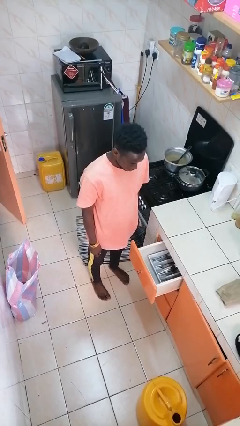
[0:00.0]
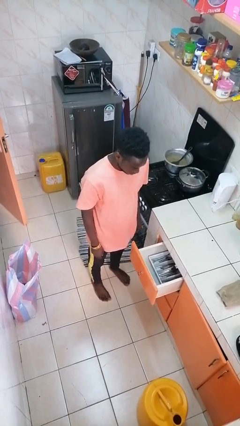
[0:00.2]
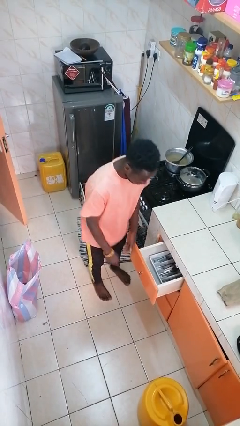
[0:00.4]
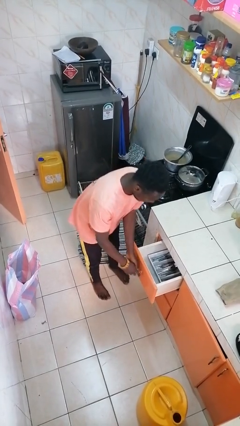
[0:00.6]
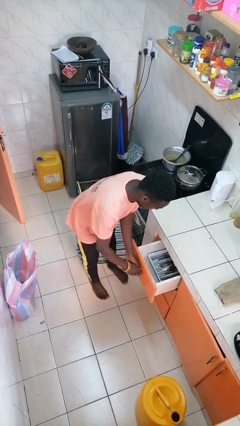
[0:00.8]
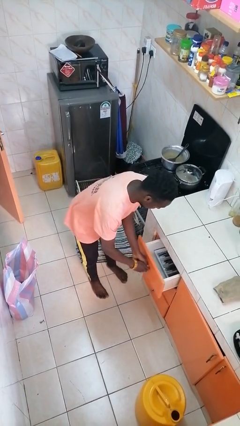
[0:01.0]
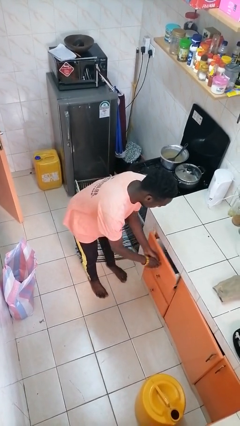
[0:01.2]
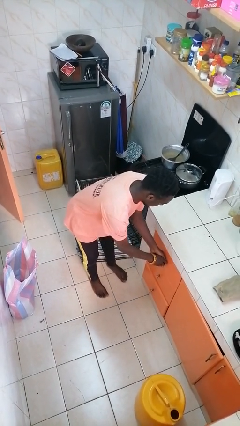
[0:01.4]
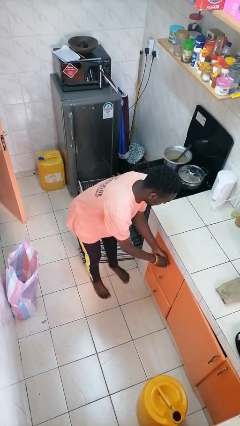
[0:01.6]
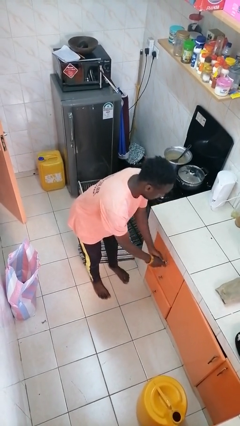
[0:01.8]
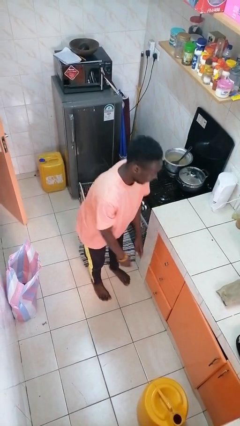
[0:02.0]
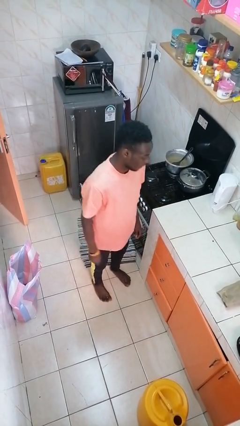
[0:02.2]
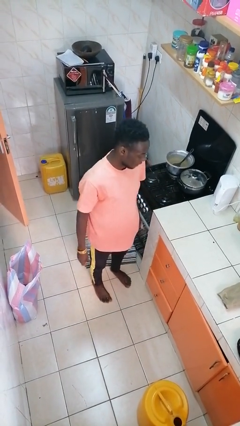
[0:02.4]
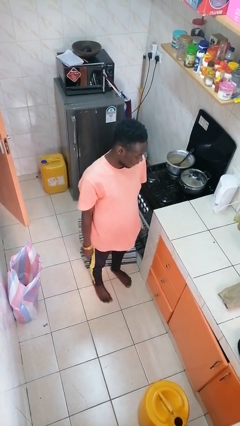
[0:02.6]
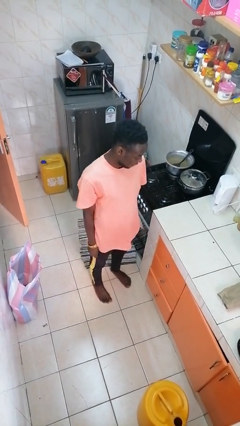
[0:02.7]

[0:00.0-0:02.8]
person closes kitchen drawer

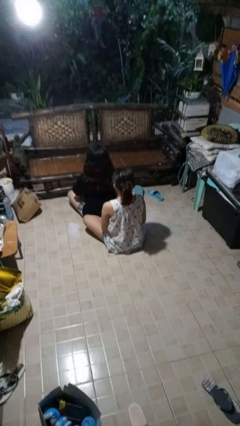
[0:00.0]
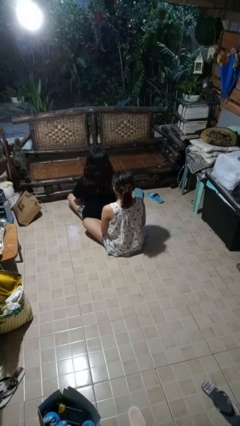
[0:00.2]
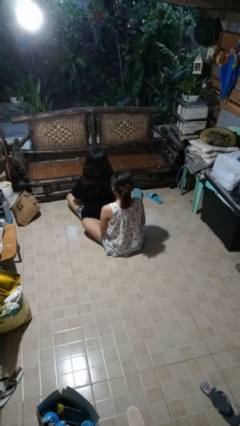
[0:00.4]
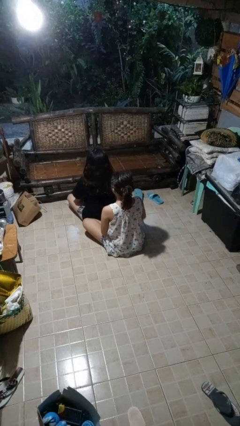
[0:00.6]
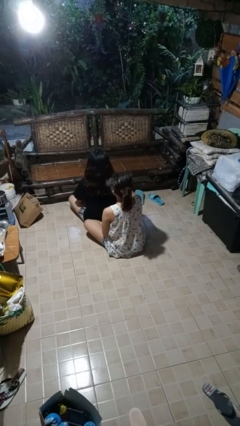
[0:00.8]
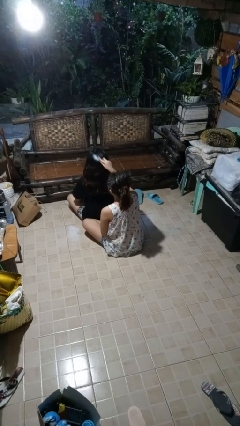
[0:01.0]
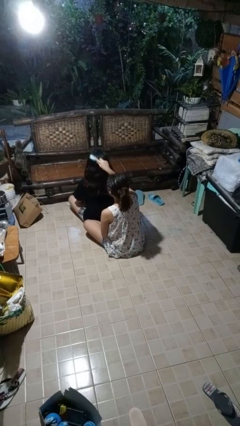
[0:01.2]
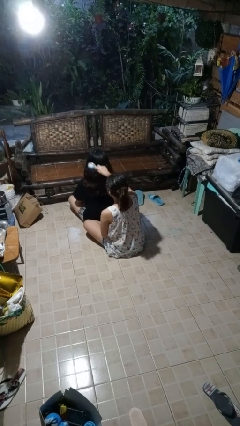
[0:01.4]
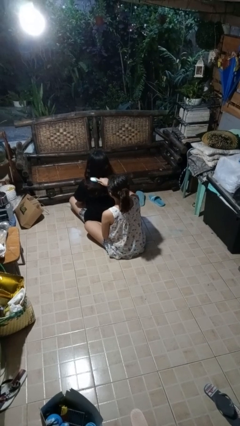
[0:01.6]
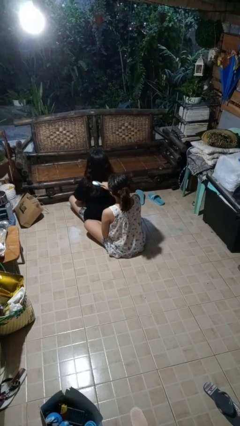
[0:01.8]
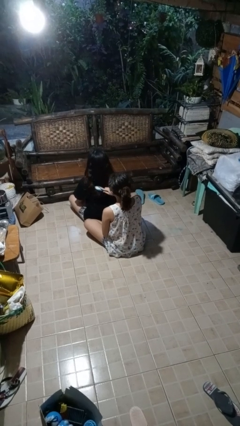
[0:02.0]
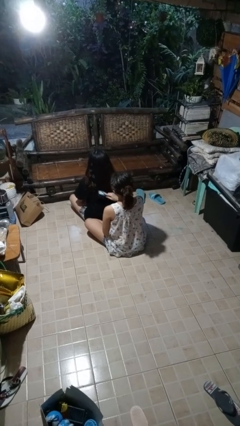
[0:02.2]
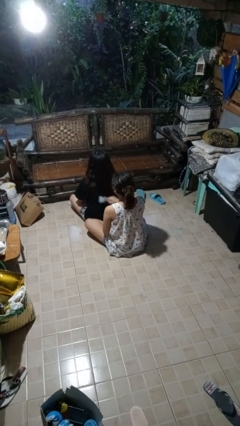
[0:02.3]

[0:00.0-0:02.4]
person brushes hair of person

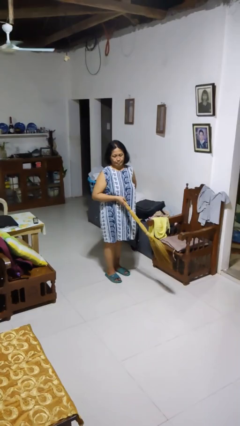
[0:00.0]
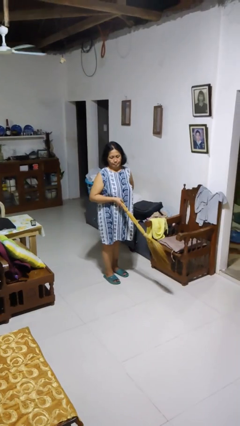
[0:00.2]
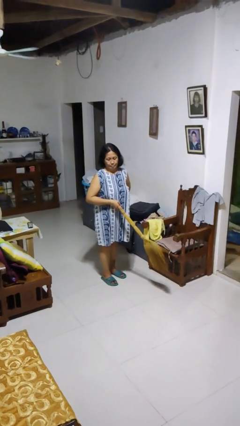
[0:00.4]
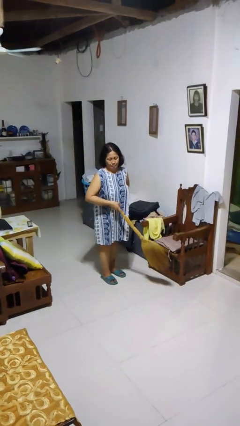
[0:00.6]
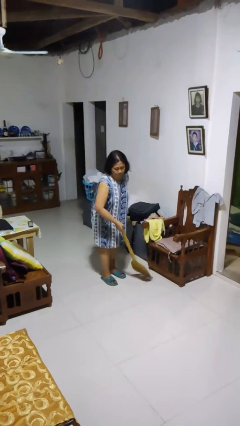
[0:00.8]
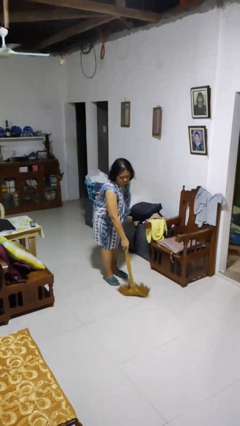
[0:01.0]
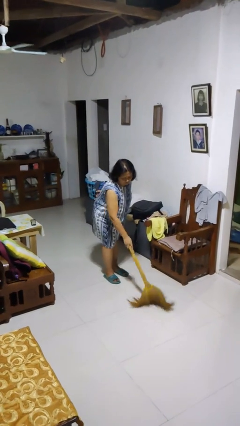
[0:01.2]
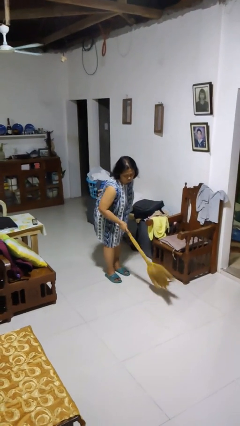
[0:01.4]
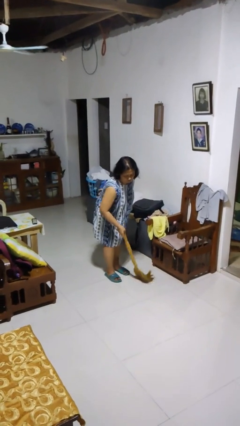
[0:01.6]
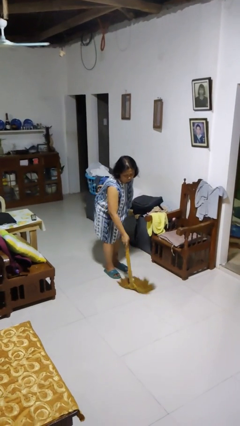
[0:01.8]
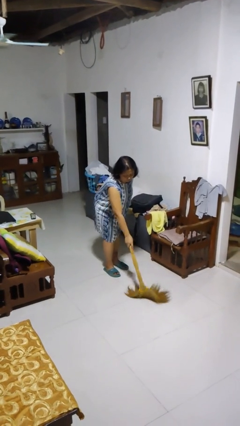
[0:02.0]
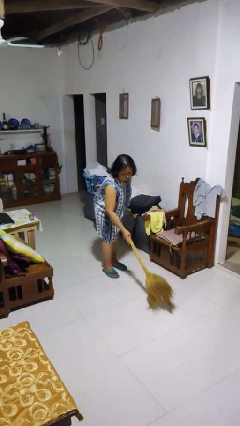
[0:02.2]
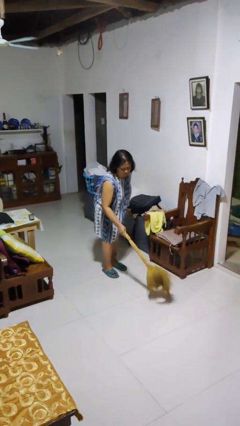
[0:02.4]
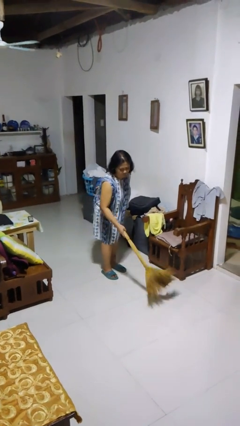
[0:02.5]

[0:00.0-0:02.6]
person sweeps floor

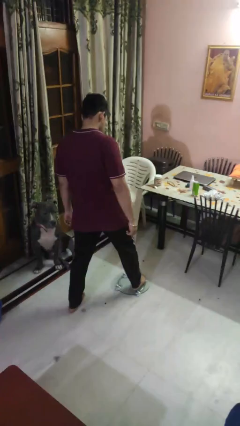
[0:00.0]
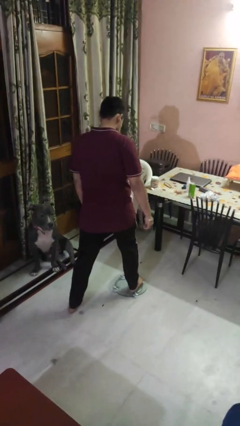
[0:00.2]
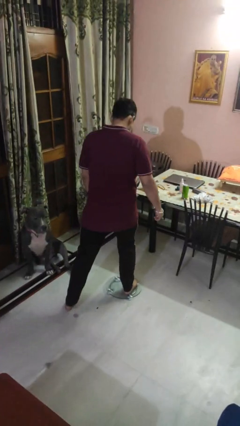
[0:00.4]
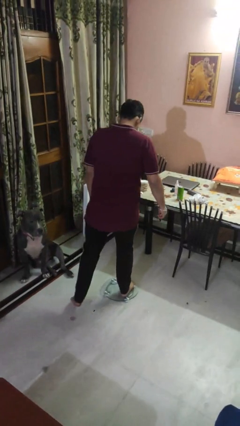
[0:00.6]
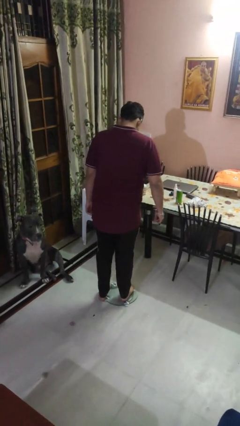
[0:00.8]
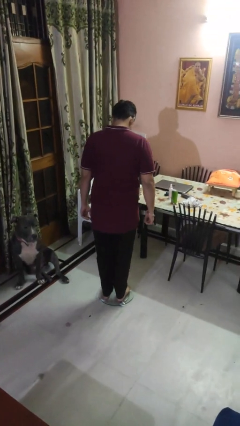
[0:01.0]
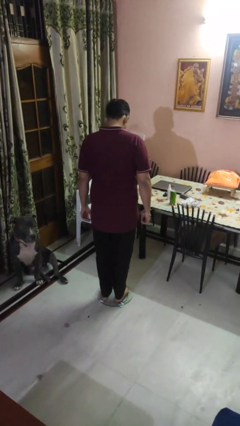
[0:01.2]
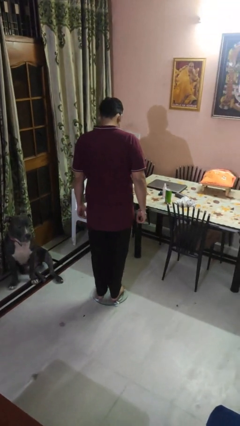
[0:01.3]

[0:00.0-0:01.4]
person uses bodyweight scale

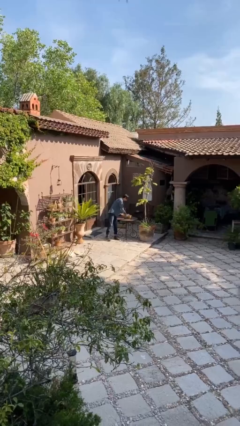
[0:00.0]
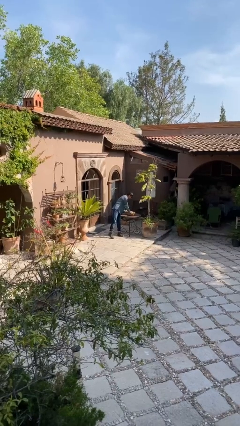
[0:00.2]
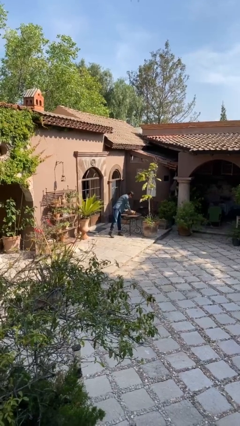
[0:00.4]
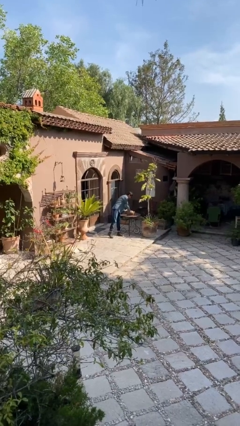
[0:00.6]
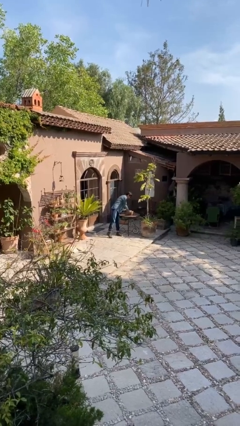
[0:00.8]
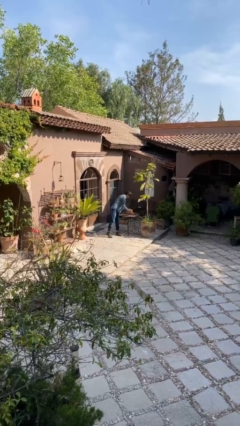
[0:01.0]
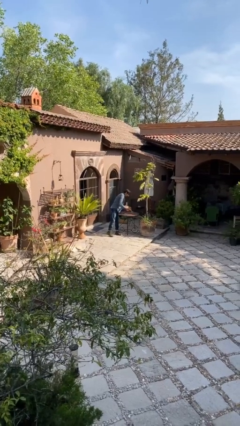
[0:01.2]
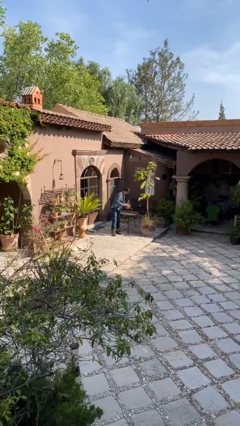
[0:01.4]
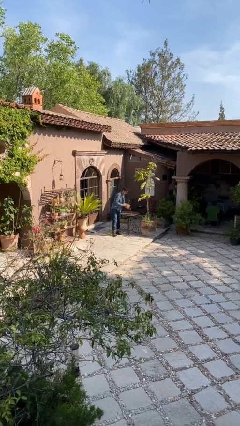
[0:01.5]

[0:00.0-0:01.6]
person picks up object from table

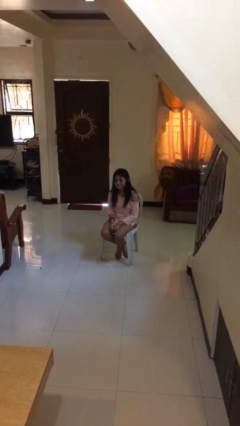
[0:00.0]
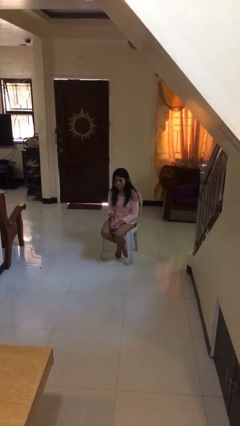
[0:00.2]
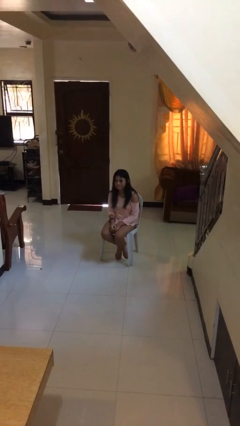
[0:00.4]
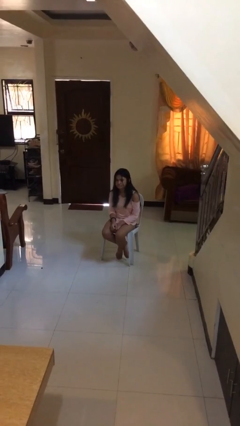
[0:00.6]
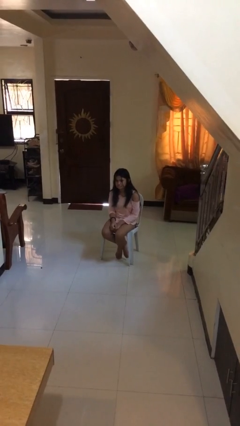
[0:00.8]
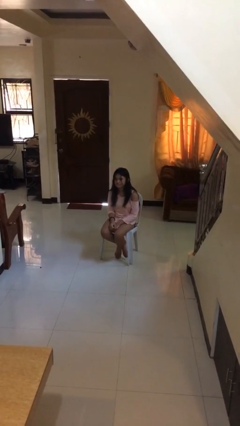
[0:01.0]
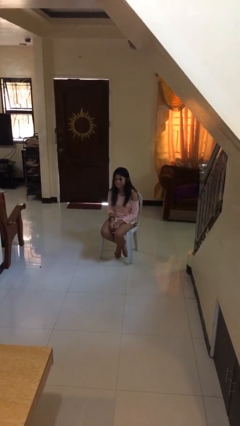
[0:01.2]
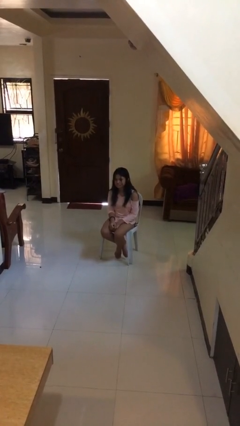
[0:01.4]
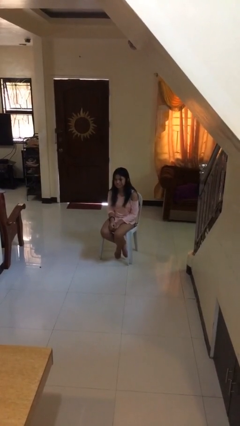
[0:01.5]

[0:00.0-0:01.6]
person nods head

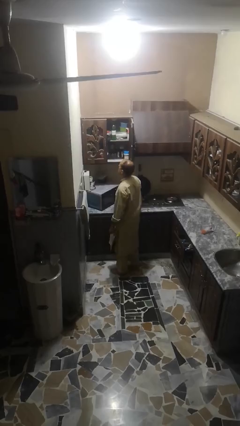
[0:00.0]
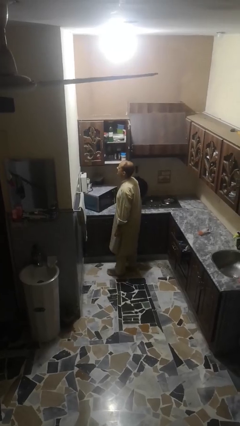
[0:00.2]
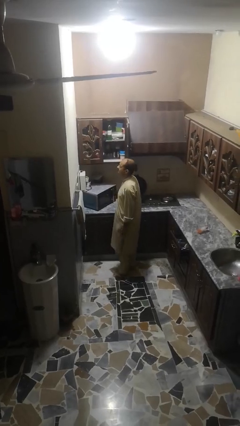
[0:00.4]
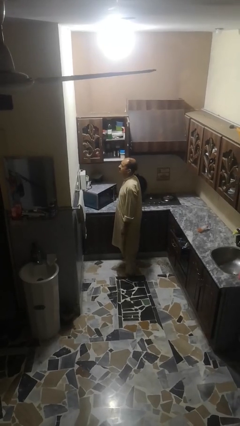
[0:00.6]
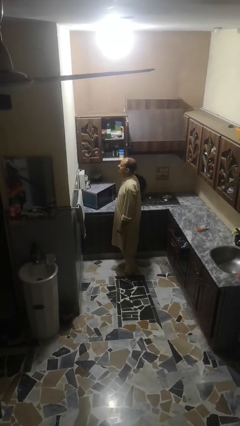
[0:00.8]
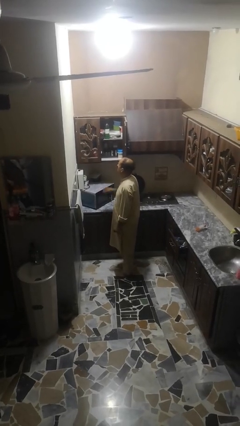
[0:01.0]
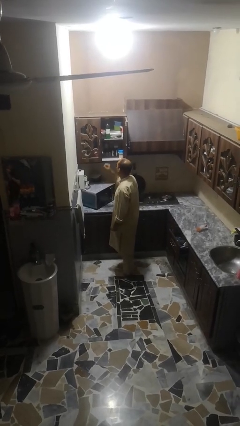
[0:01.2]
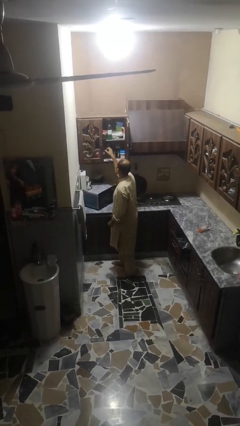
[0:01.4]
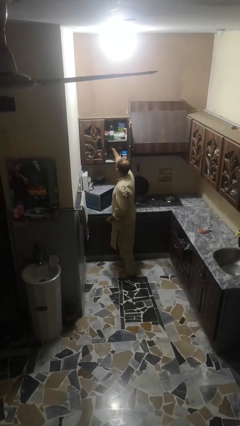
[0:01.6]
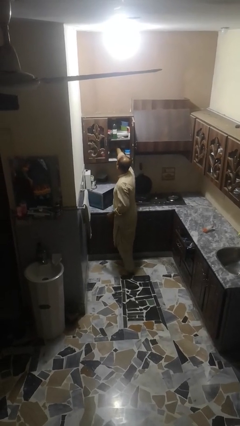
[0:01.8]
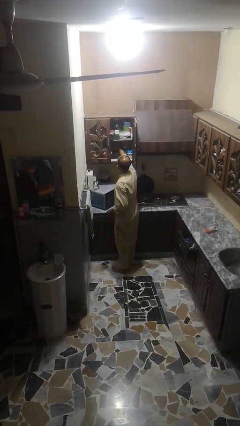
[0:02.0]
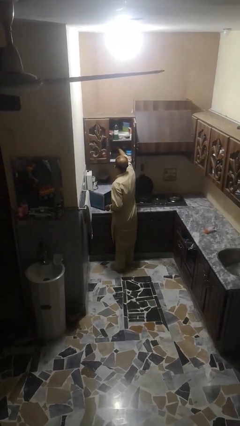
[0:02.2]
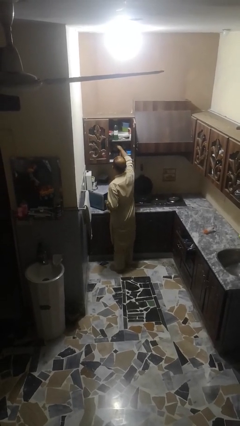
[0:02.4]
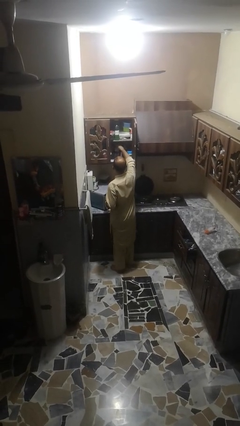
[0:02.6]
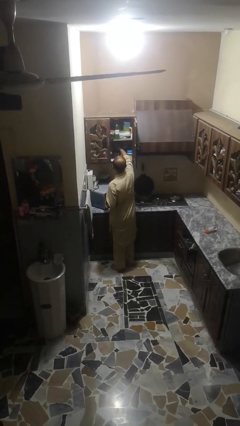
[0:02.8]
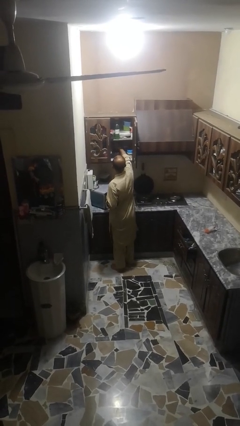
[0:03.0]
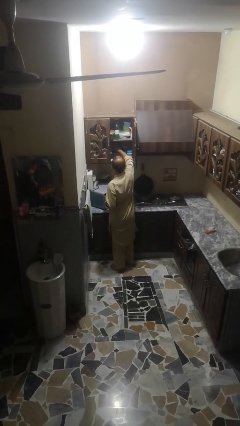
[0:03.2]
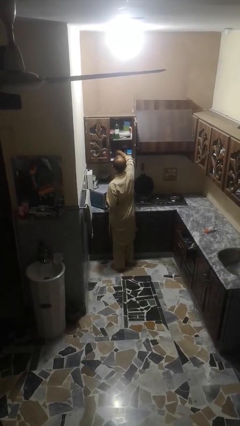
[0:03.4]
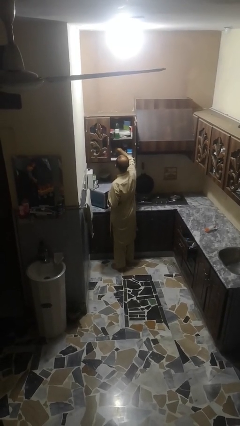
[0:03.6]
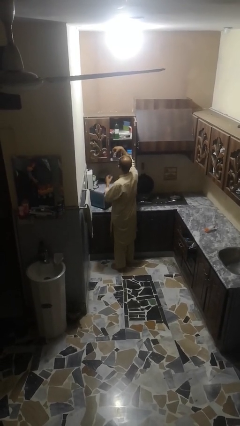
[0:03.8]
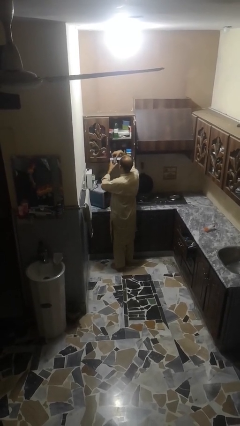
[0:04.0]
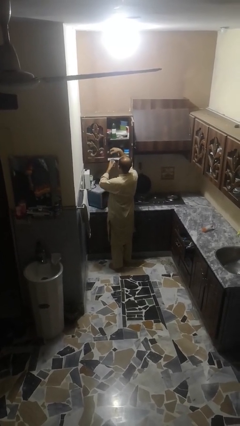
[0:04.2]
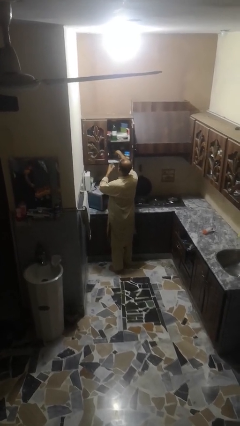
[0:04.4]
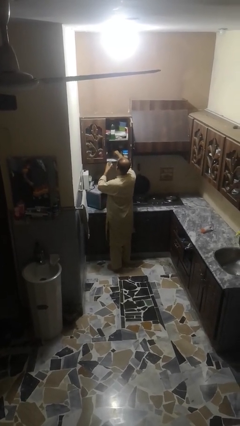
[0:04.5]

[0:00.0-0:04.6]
person searches in cabinet
